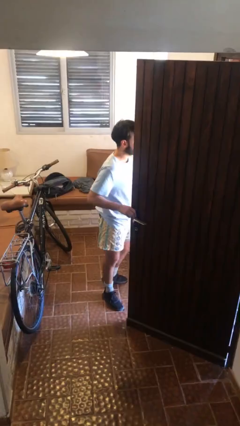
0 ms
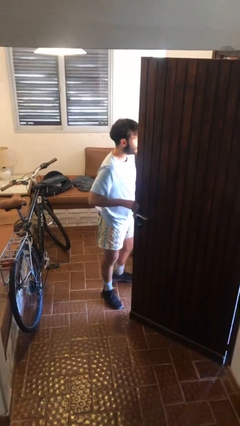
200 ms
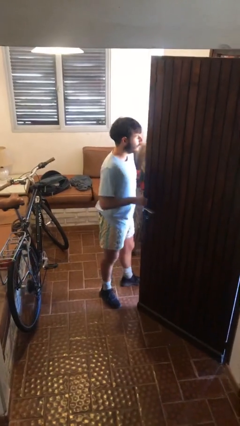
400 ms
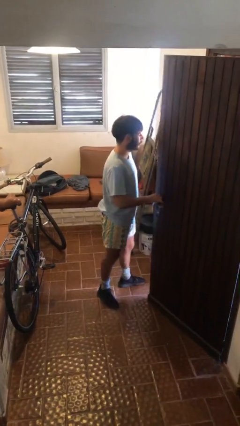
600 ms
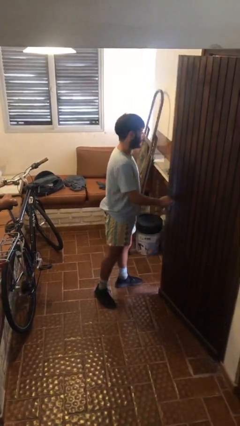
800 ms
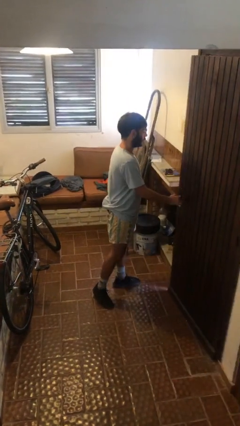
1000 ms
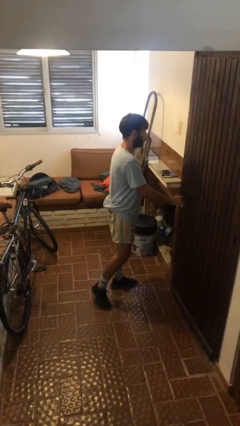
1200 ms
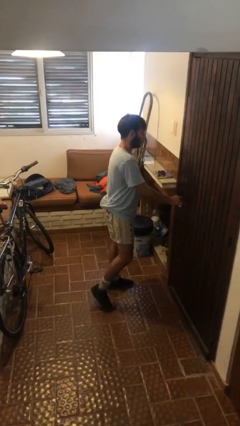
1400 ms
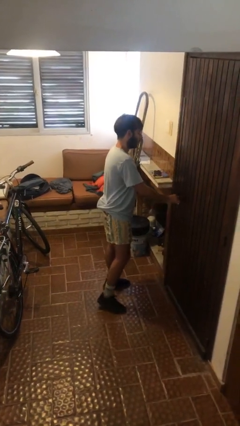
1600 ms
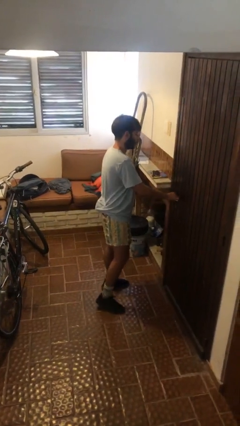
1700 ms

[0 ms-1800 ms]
person closes facility door

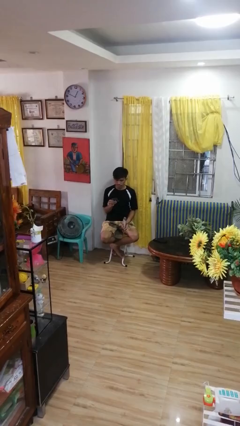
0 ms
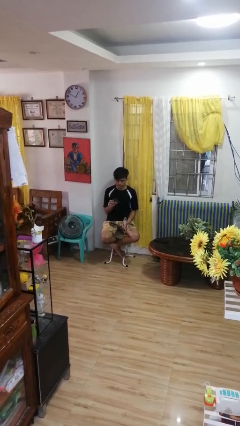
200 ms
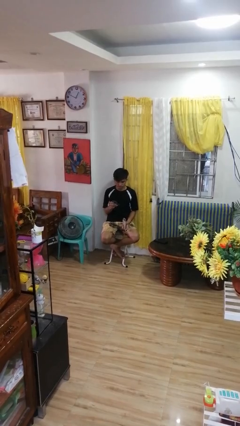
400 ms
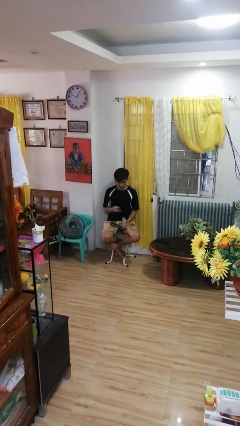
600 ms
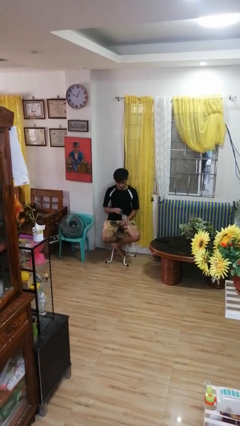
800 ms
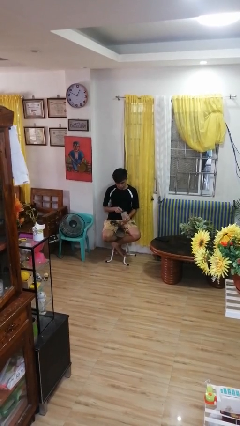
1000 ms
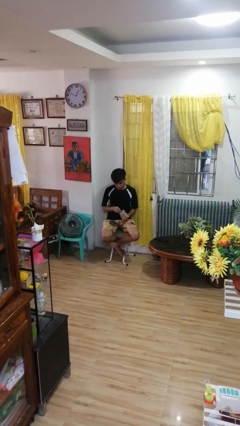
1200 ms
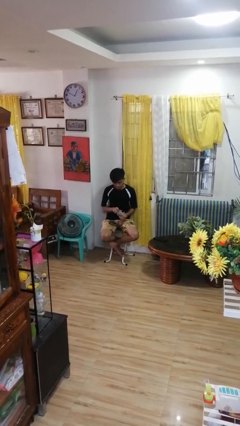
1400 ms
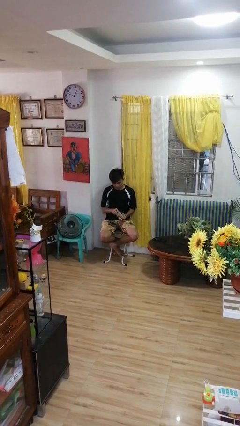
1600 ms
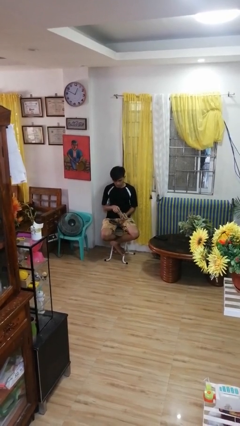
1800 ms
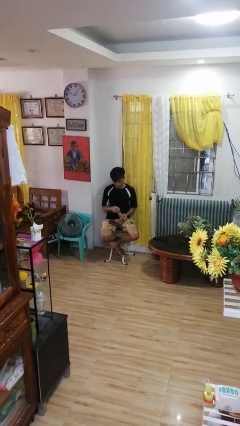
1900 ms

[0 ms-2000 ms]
person puts object into purse

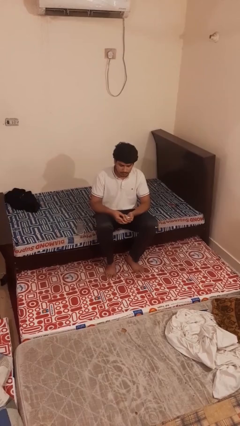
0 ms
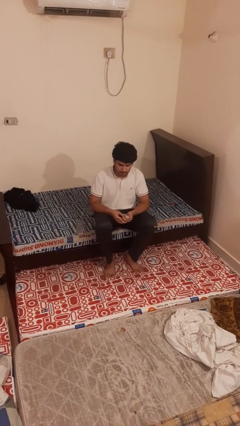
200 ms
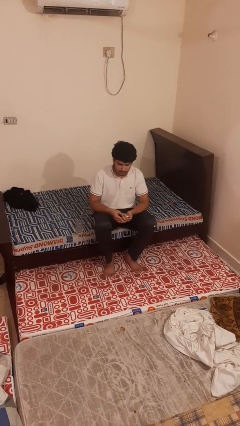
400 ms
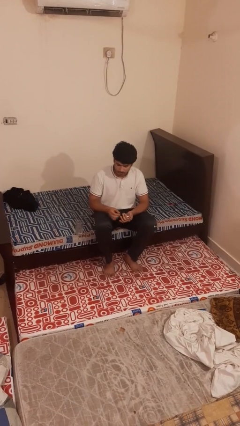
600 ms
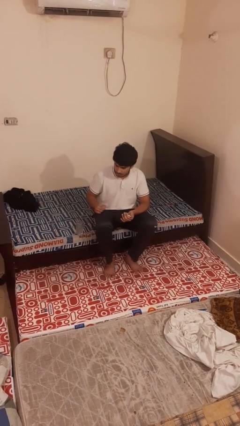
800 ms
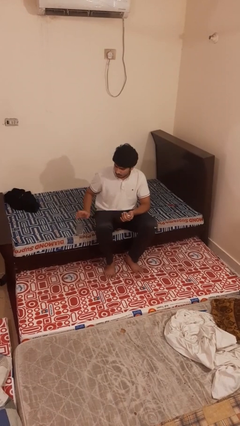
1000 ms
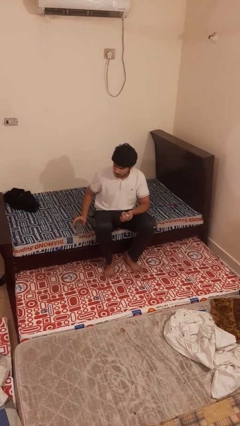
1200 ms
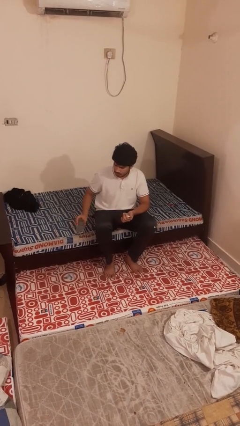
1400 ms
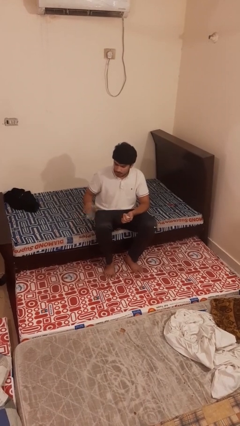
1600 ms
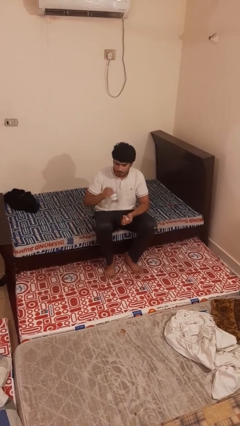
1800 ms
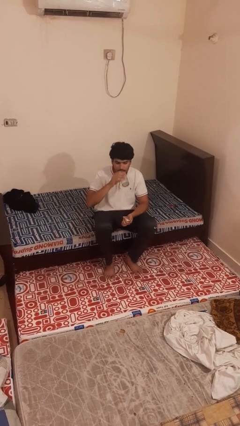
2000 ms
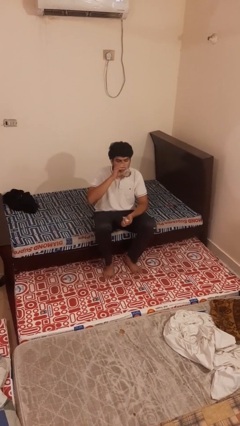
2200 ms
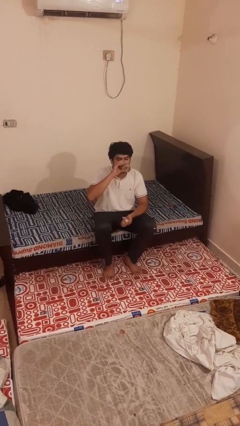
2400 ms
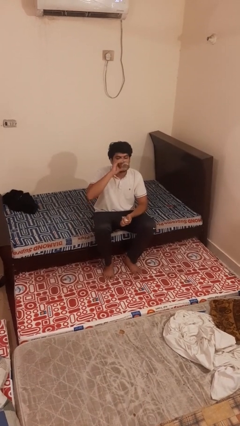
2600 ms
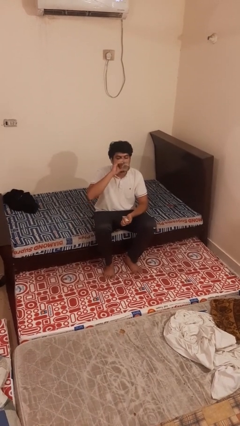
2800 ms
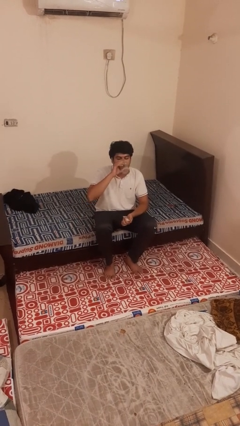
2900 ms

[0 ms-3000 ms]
person drinks from cup

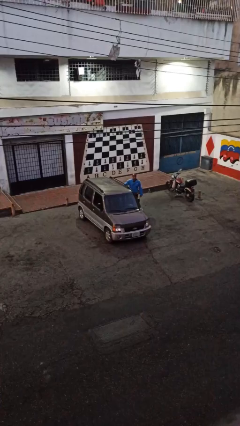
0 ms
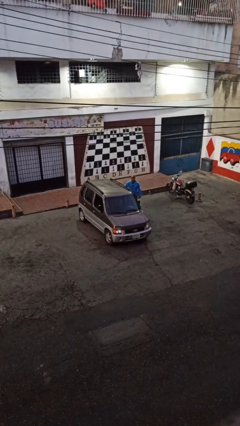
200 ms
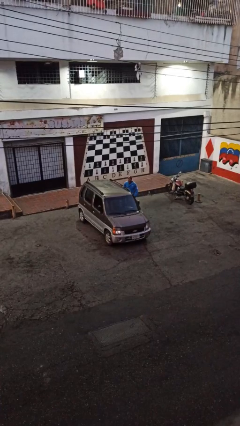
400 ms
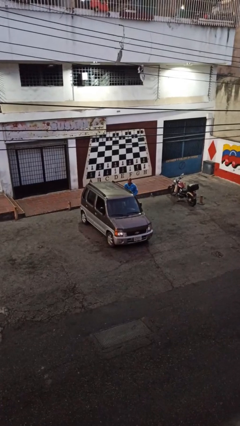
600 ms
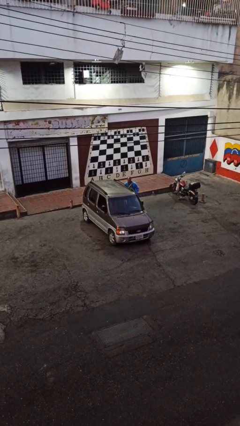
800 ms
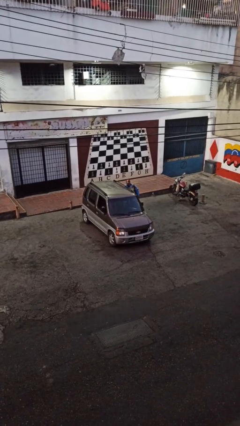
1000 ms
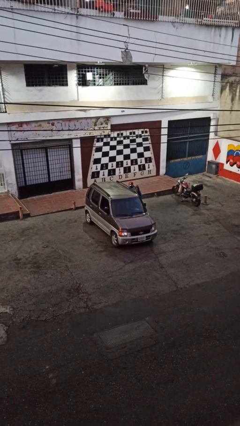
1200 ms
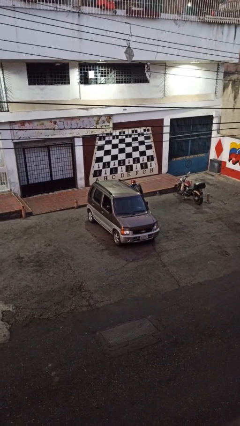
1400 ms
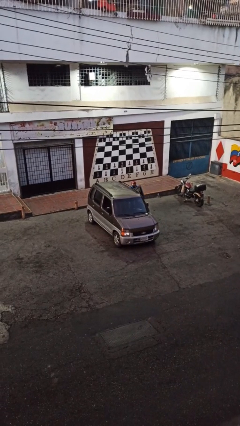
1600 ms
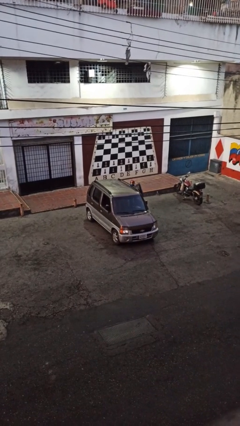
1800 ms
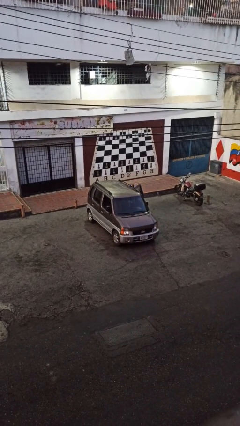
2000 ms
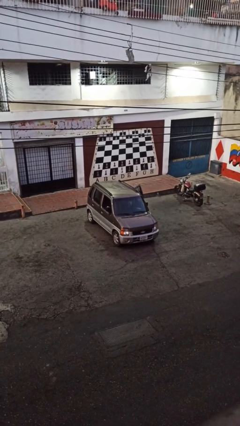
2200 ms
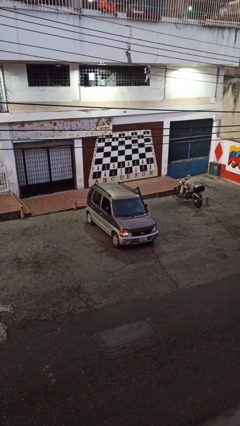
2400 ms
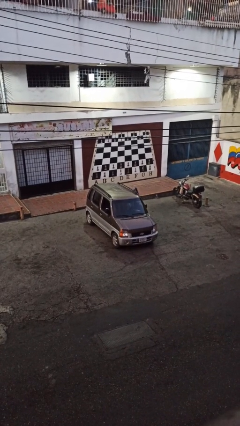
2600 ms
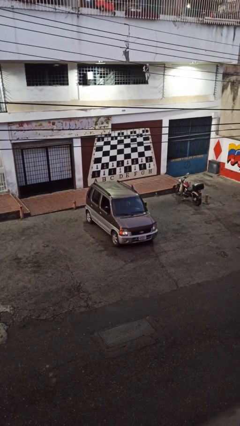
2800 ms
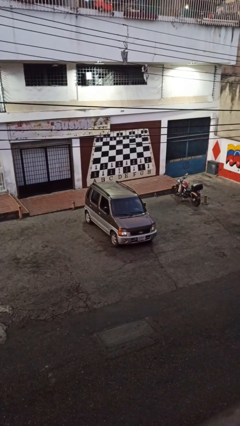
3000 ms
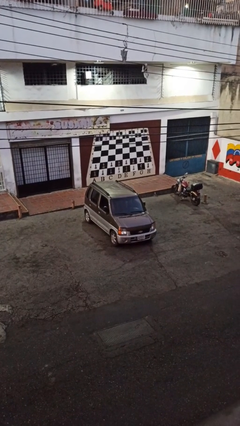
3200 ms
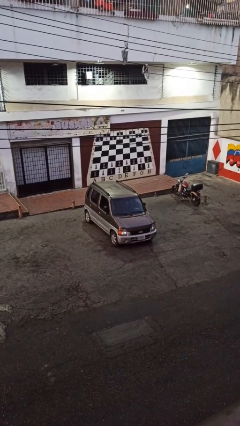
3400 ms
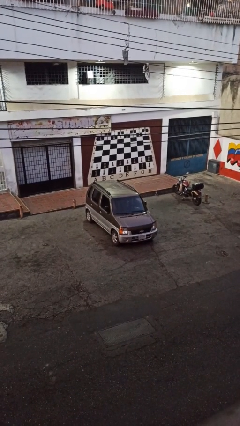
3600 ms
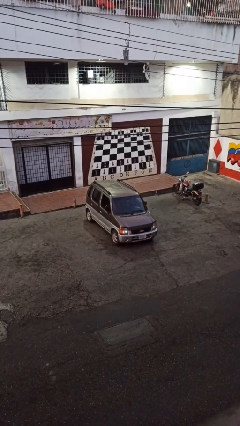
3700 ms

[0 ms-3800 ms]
car picks up person

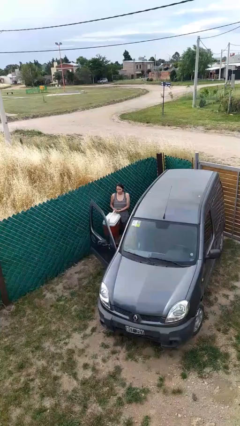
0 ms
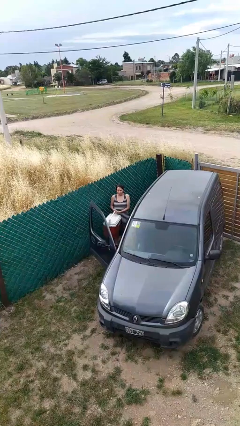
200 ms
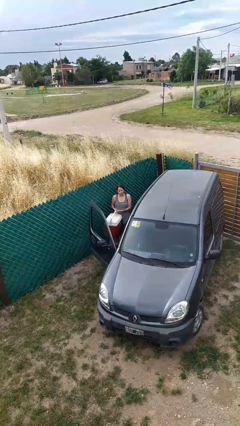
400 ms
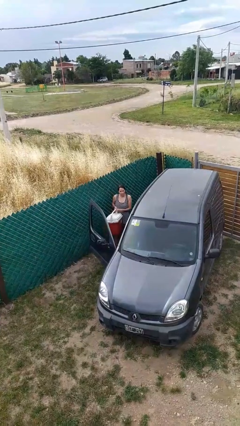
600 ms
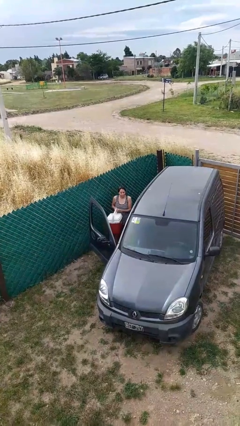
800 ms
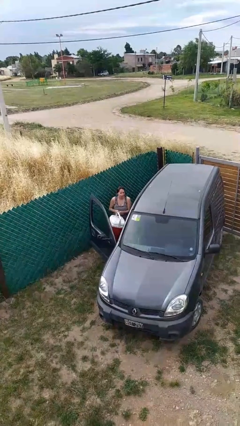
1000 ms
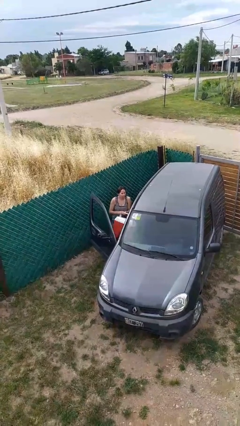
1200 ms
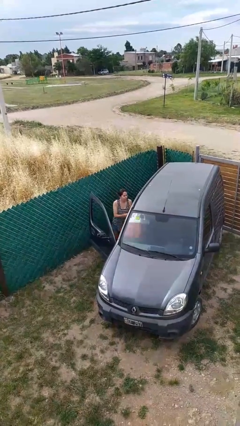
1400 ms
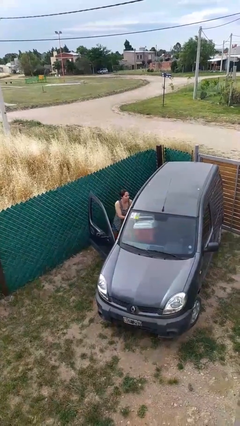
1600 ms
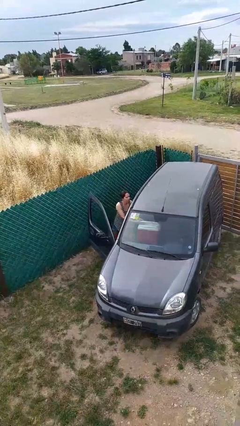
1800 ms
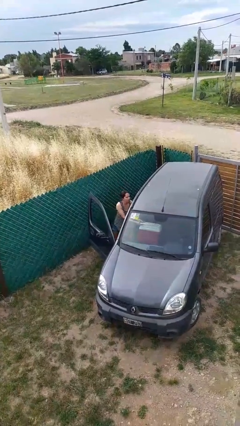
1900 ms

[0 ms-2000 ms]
person loads car

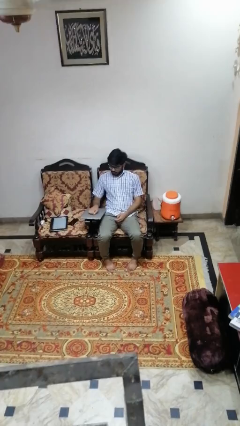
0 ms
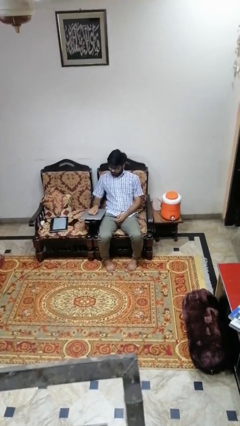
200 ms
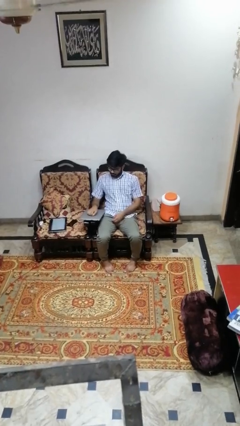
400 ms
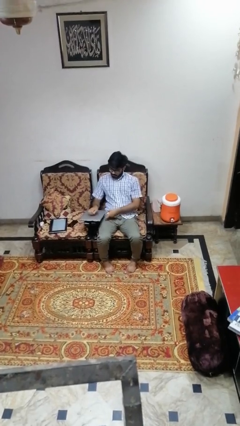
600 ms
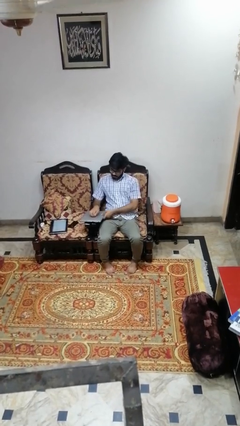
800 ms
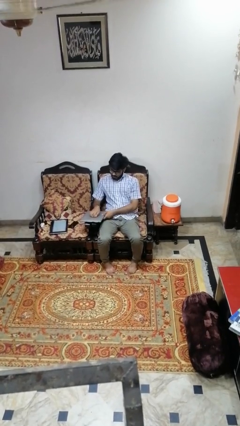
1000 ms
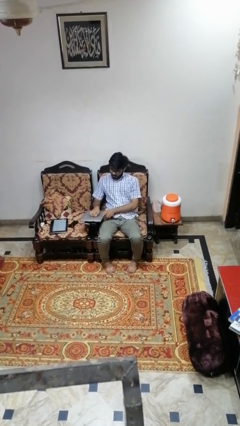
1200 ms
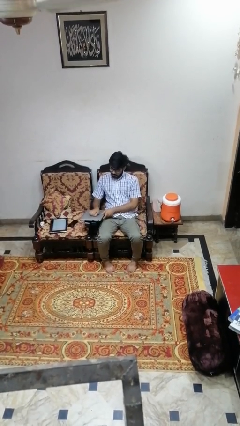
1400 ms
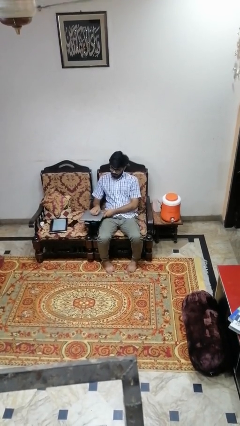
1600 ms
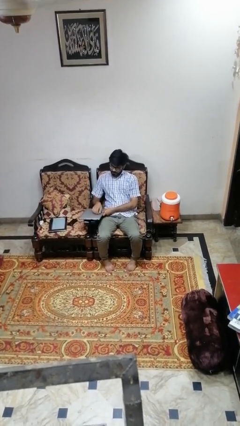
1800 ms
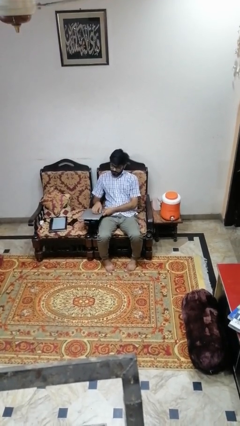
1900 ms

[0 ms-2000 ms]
person taps object with finger

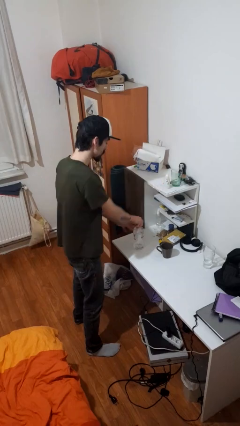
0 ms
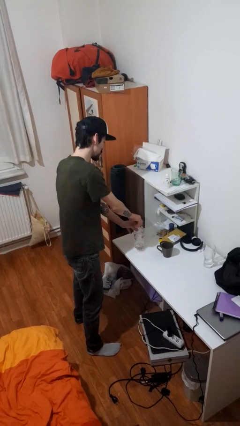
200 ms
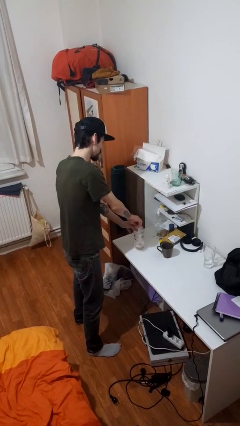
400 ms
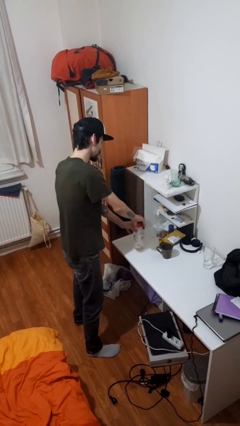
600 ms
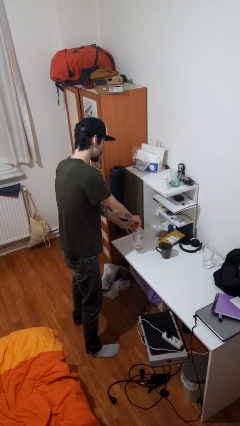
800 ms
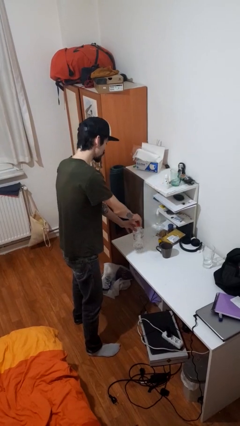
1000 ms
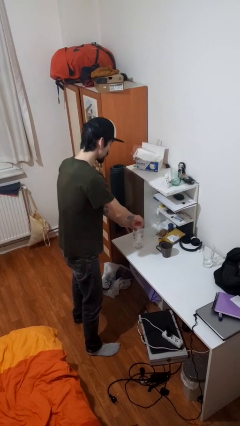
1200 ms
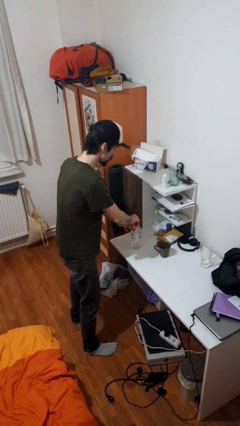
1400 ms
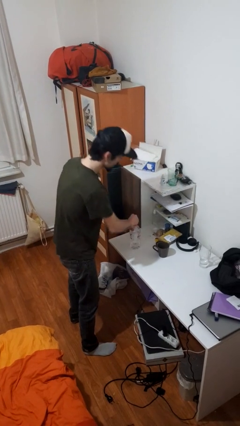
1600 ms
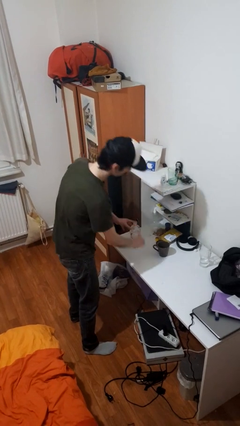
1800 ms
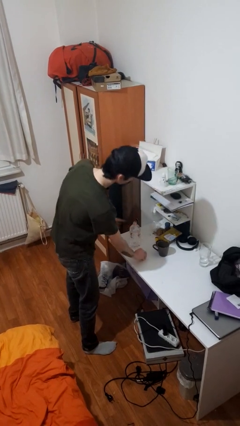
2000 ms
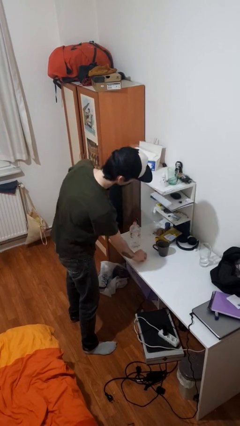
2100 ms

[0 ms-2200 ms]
person unscrews lid from bottle

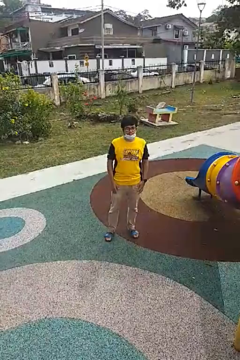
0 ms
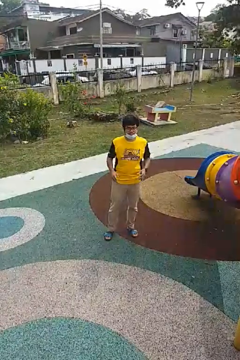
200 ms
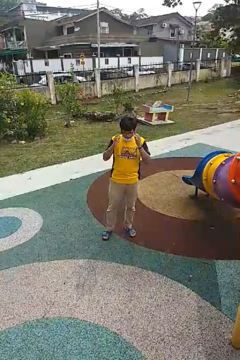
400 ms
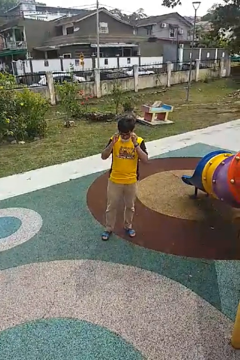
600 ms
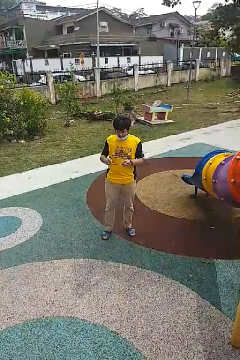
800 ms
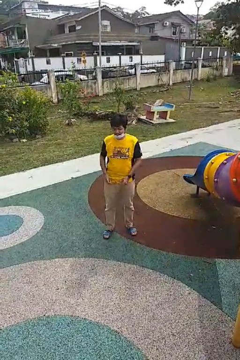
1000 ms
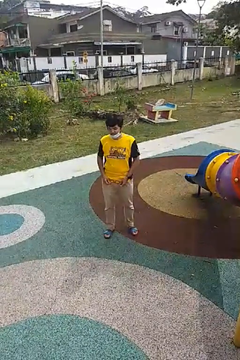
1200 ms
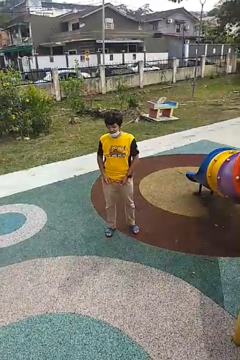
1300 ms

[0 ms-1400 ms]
person takes off glasses
